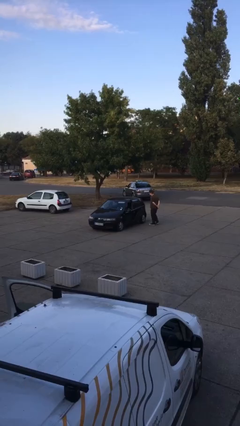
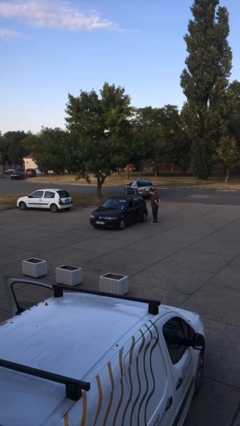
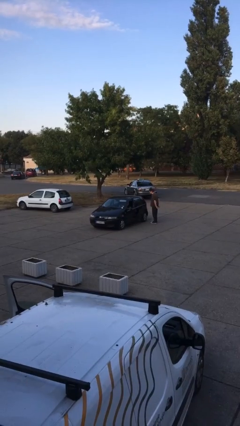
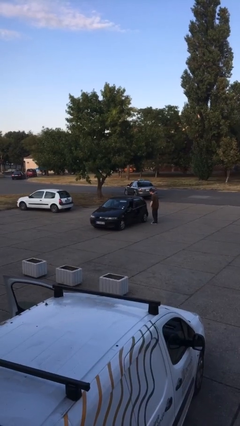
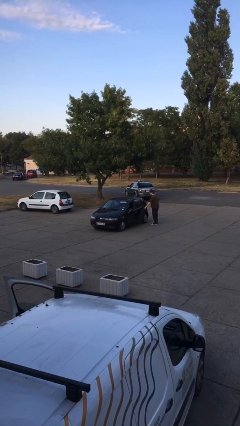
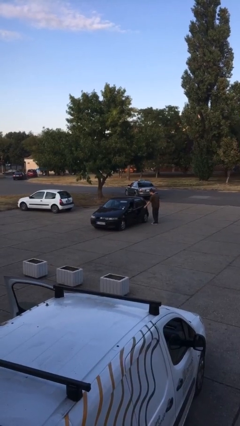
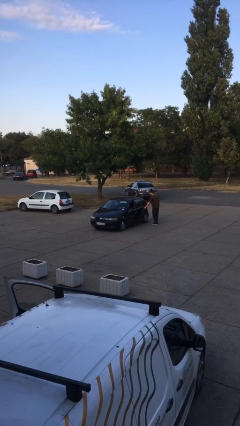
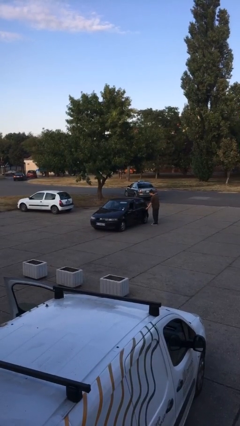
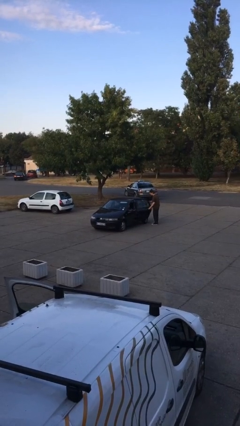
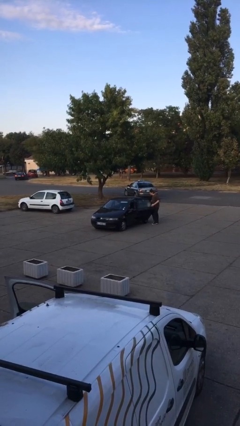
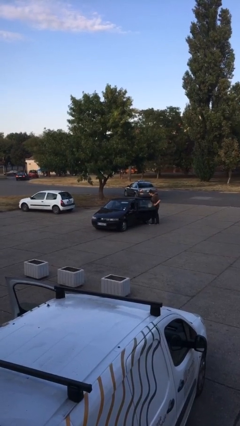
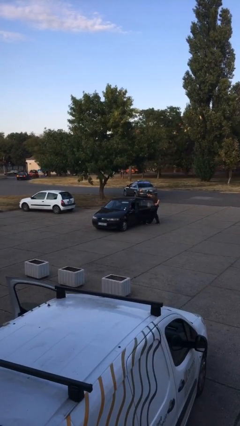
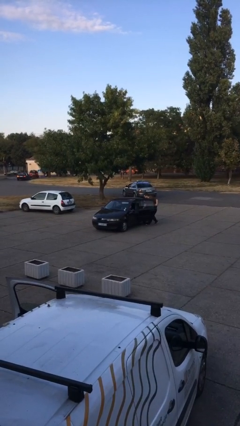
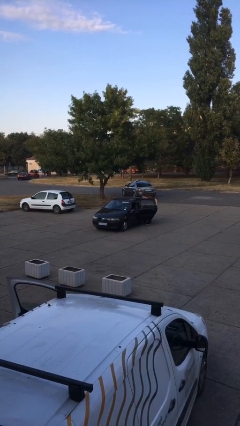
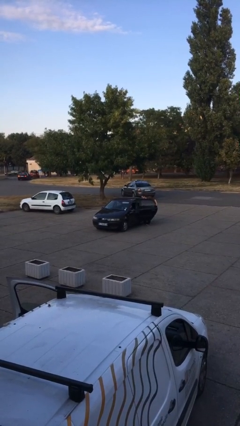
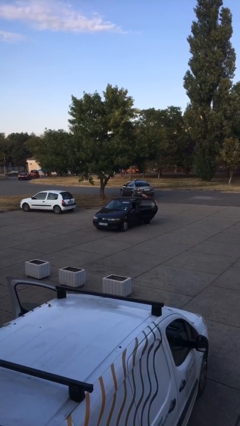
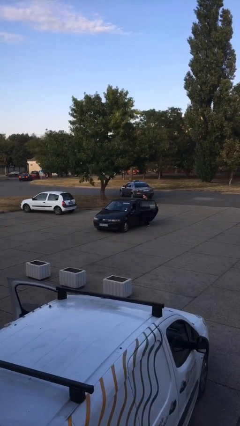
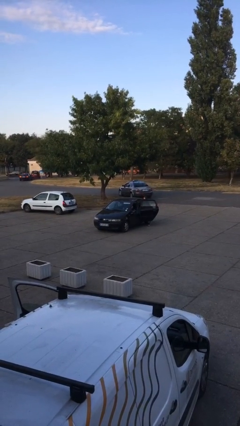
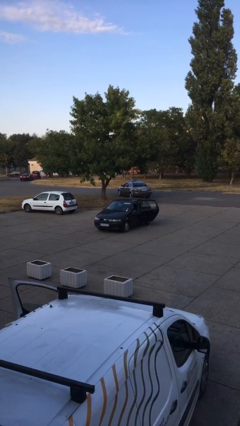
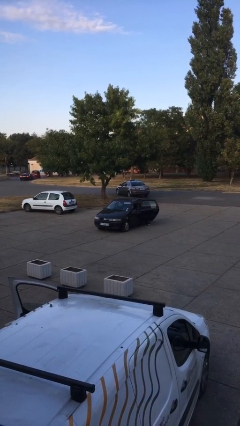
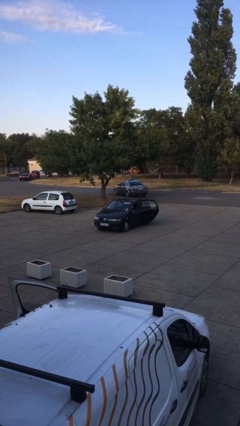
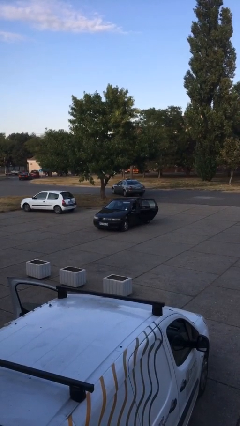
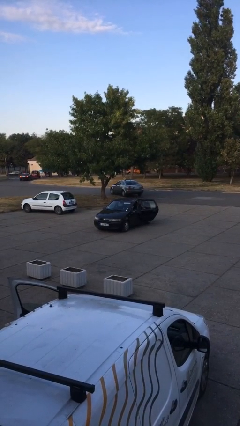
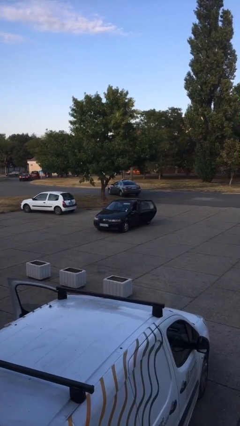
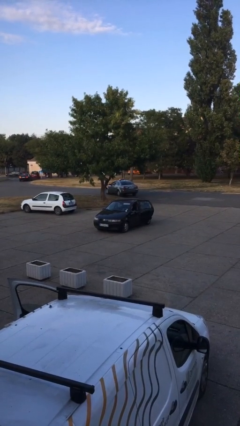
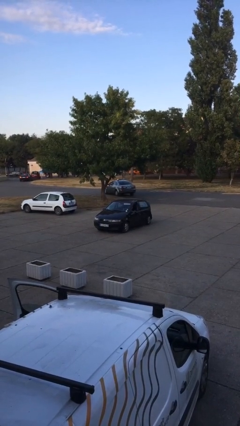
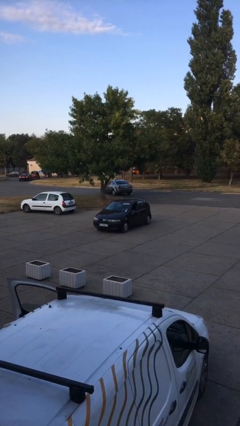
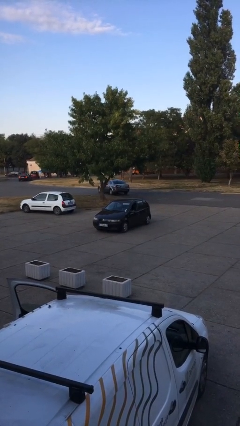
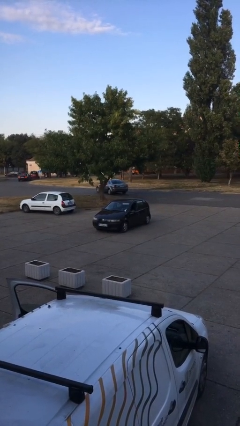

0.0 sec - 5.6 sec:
car picks up person

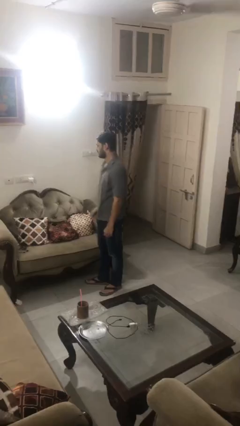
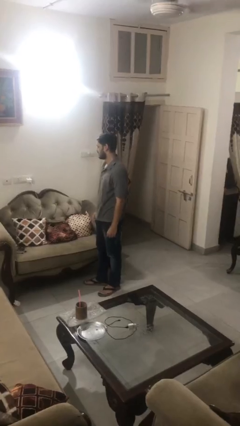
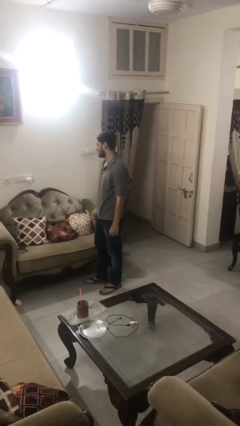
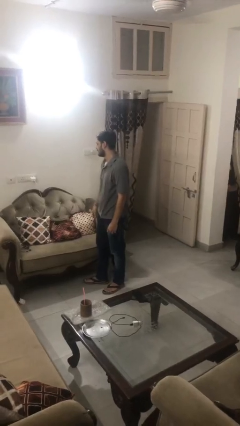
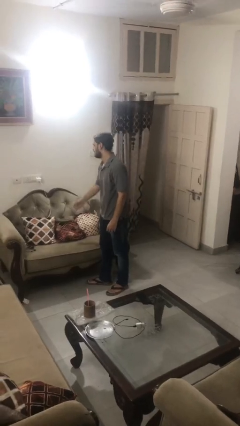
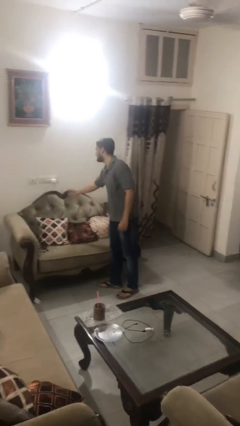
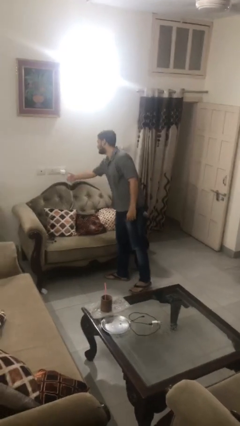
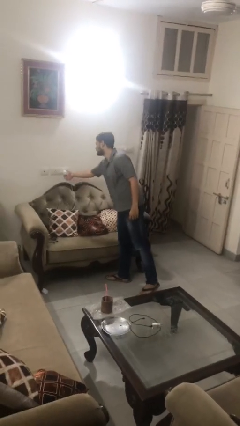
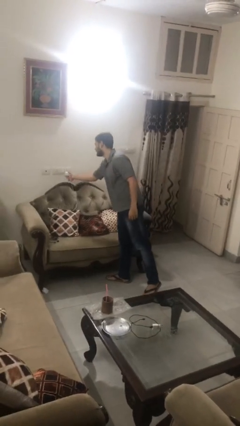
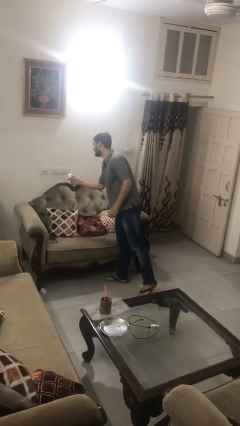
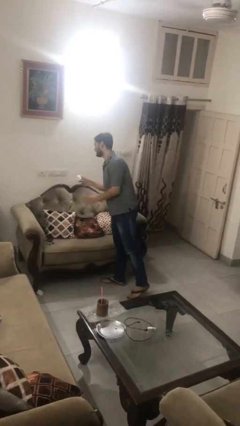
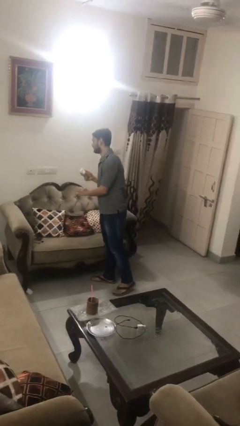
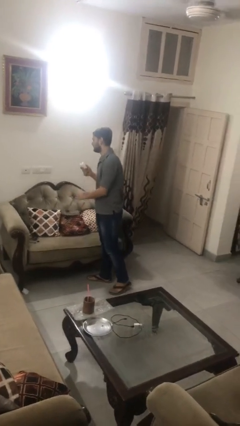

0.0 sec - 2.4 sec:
person unplugs from electrical socket

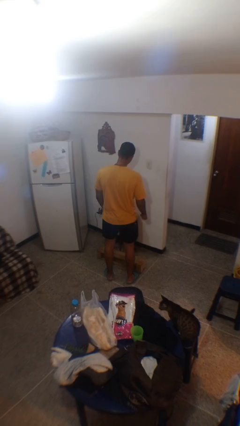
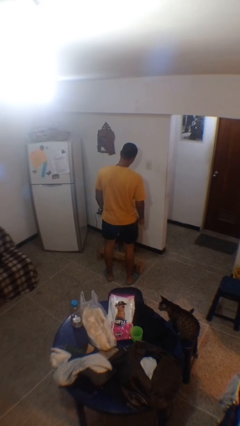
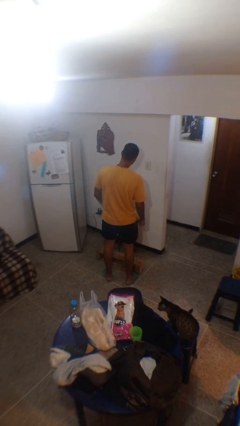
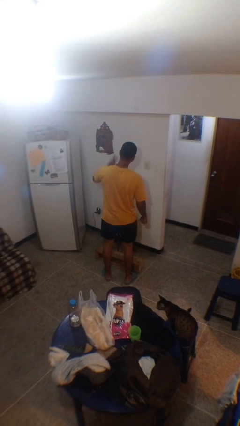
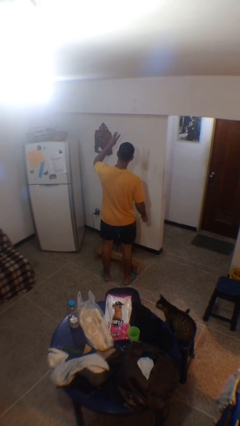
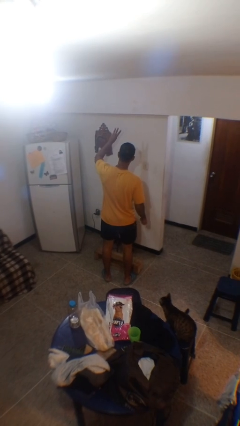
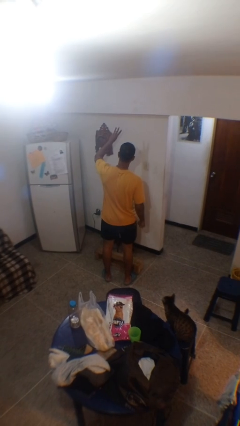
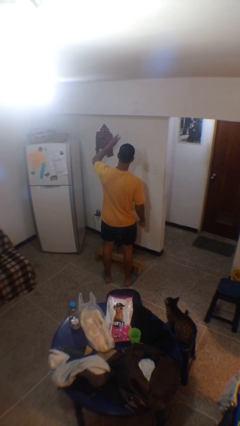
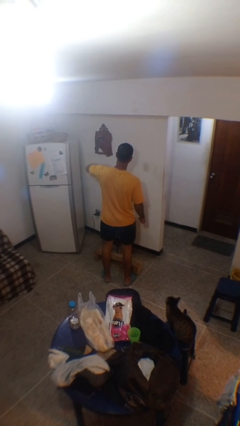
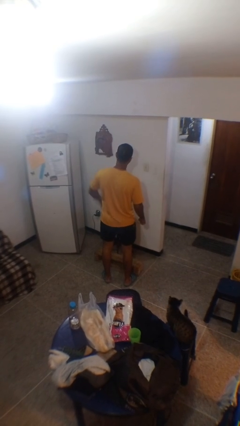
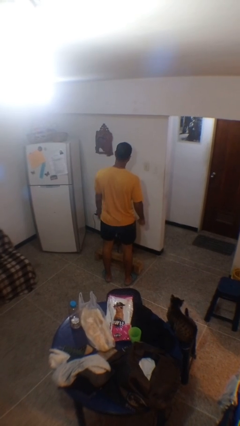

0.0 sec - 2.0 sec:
person gestures number three

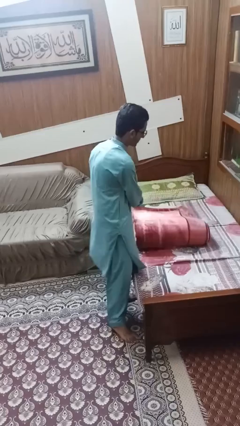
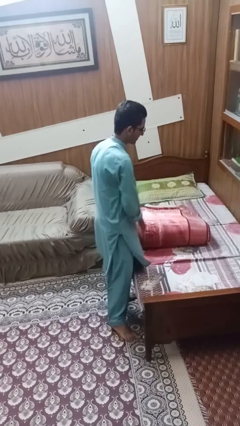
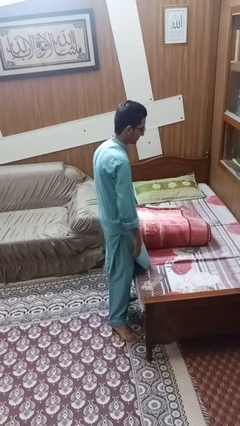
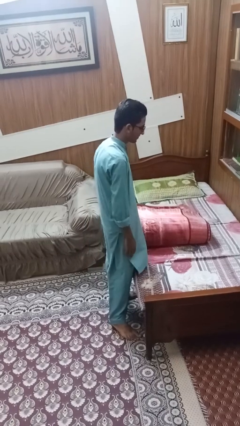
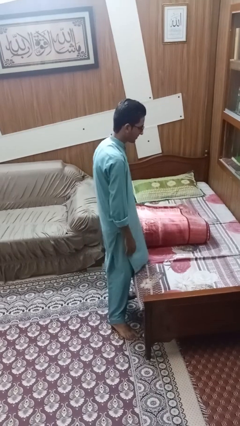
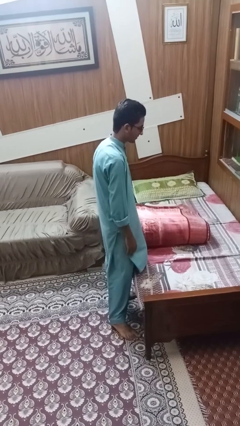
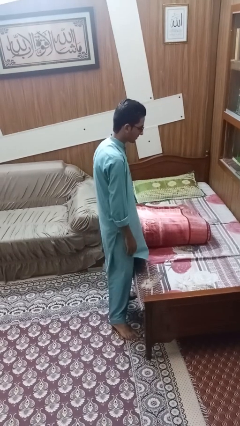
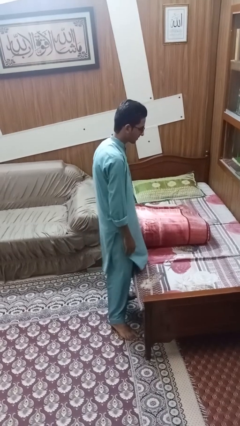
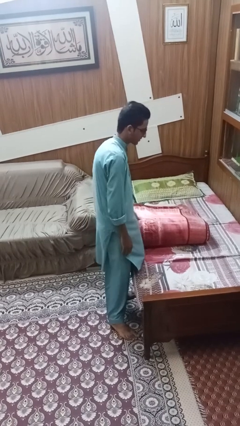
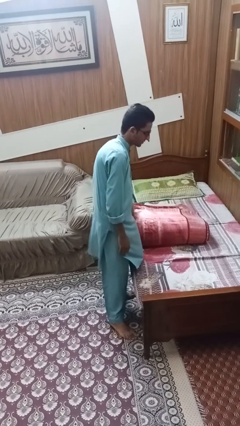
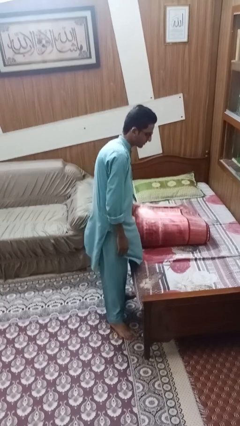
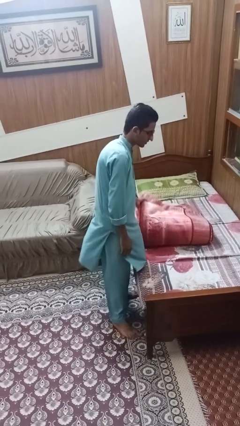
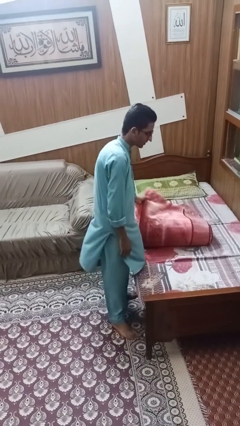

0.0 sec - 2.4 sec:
person folds blanket

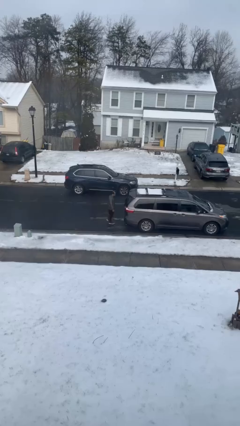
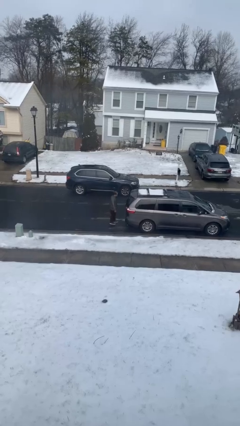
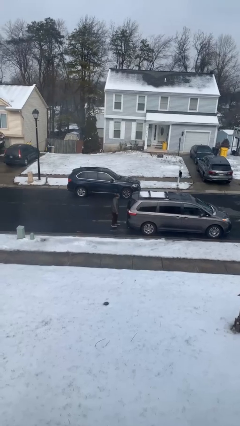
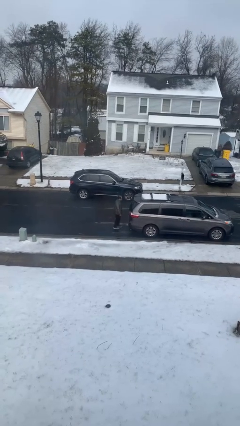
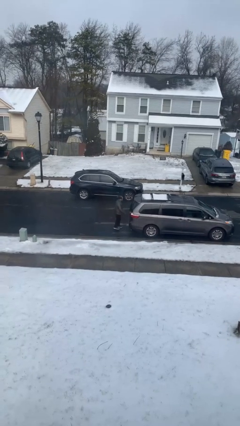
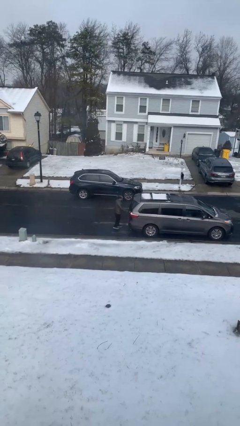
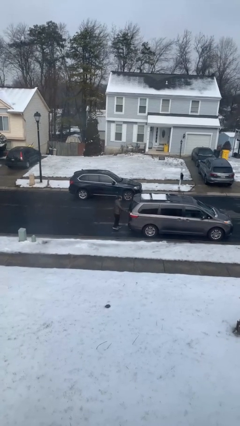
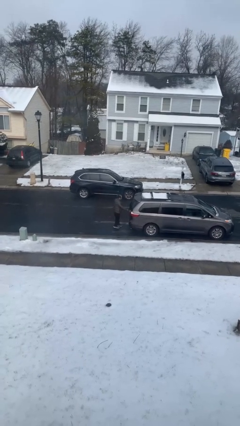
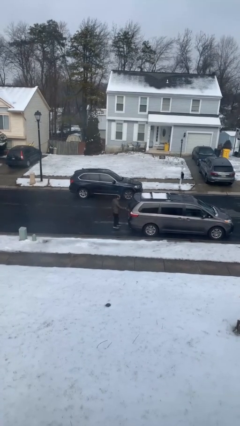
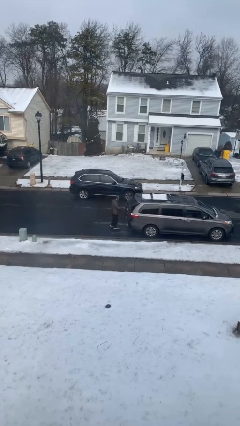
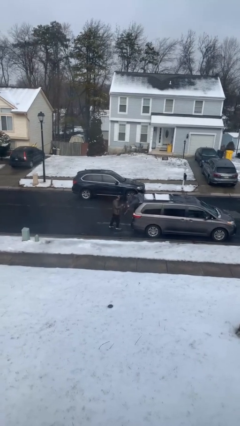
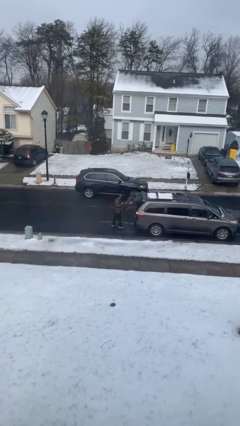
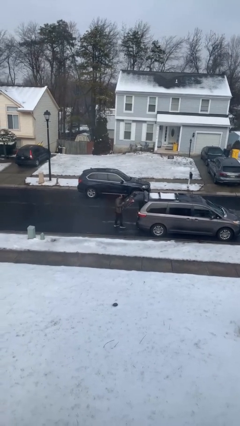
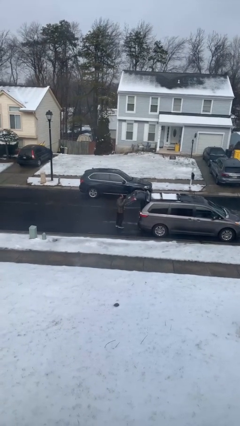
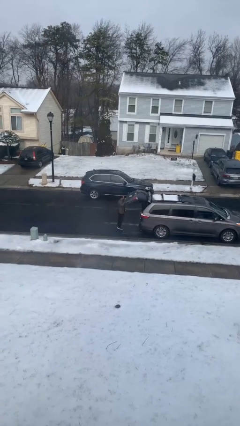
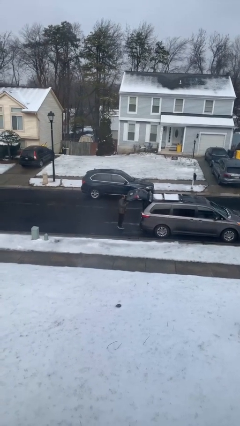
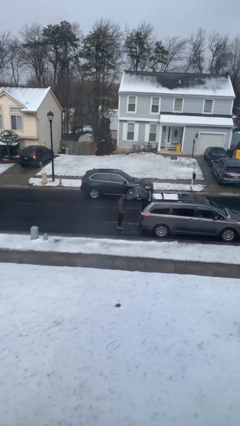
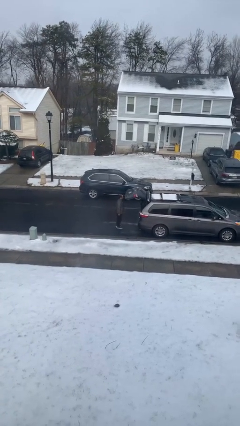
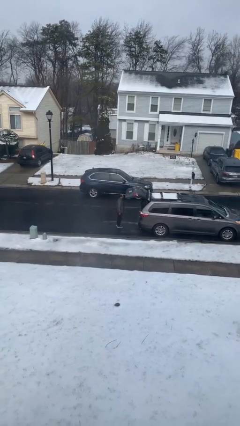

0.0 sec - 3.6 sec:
person opens car trunk

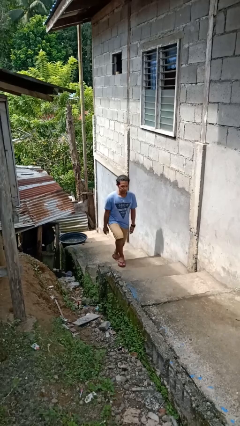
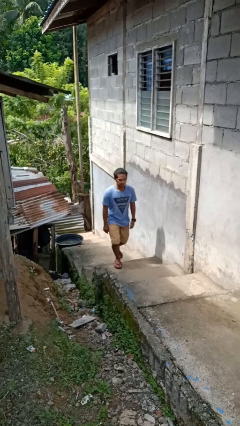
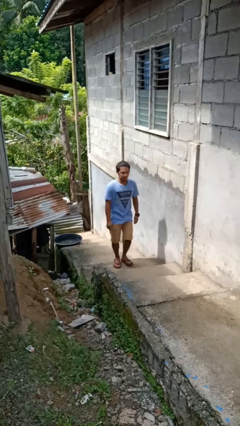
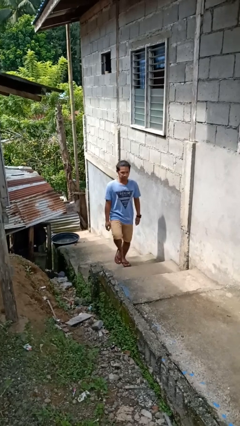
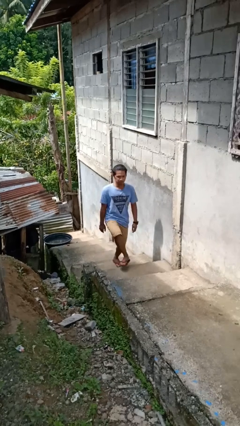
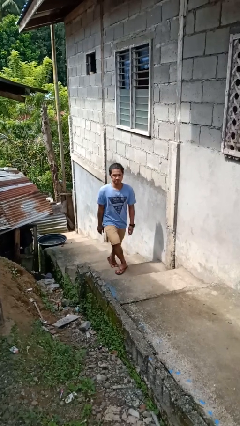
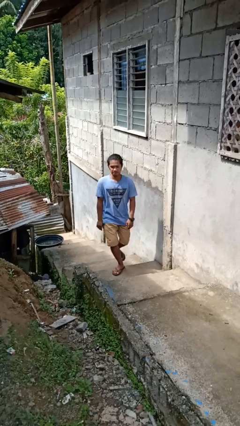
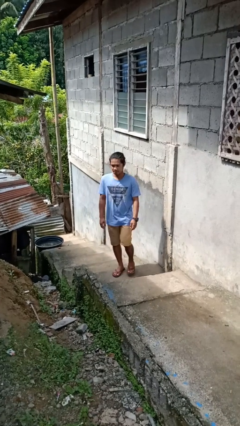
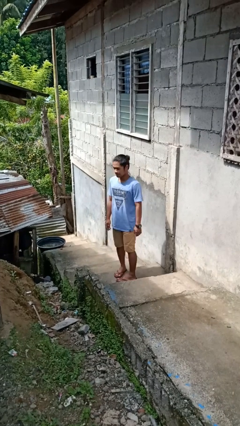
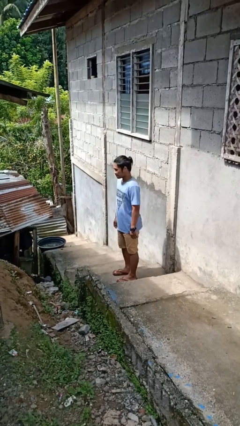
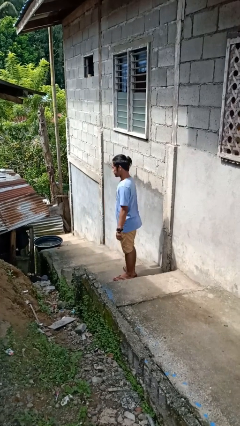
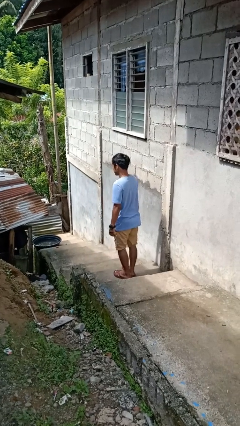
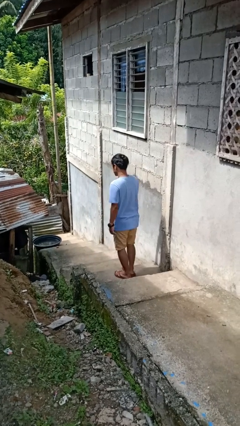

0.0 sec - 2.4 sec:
person climbs up stairs
